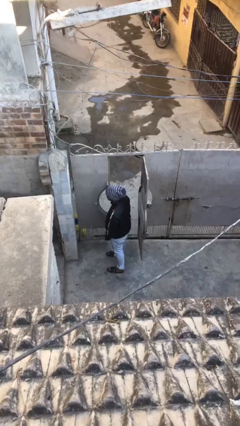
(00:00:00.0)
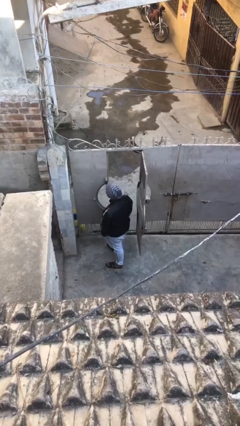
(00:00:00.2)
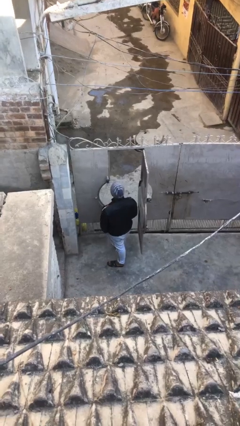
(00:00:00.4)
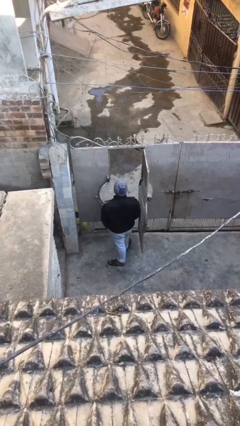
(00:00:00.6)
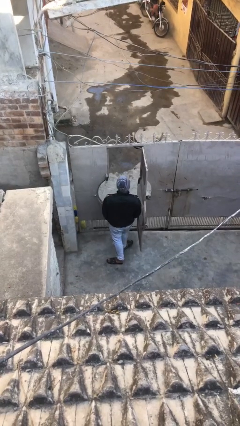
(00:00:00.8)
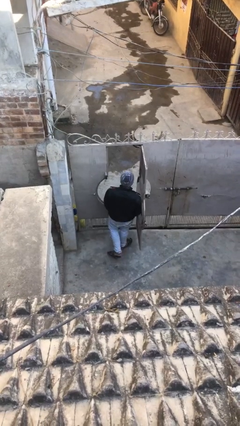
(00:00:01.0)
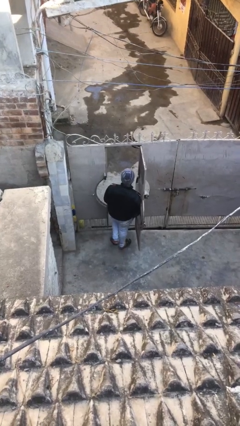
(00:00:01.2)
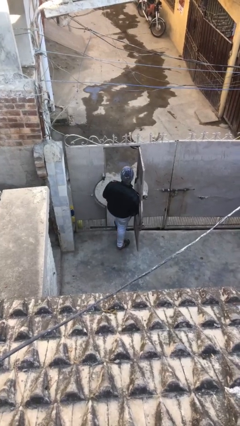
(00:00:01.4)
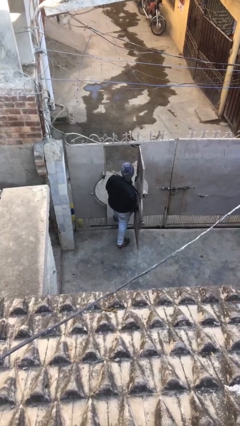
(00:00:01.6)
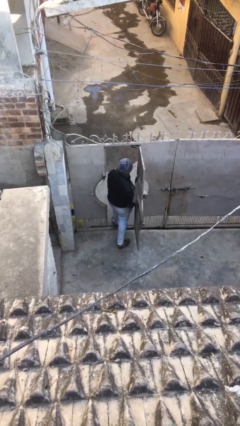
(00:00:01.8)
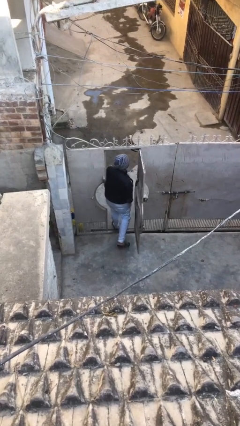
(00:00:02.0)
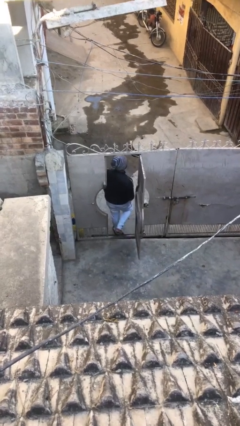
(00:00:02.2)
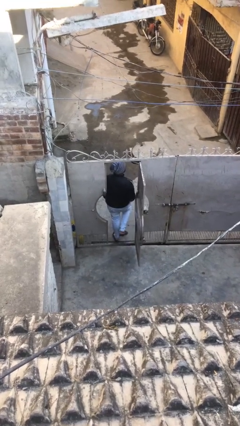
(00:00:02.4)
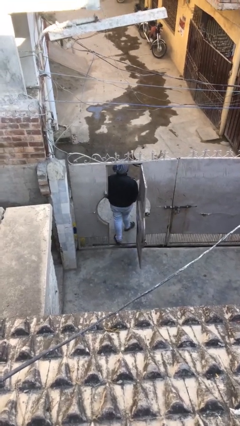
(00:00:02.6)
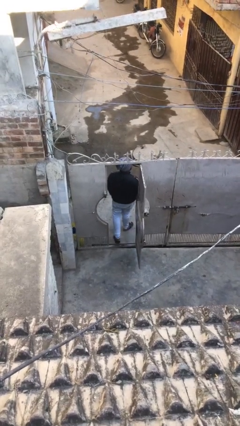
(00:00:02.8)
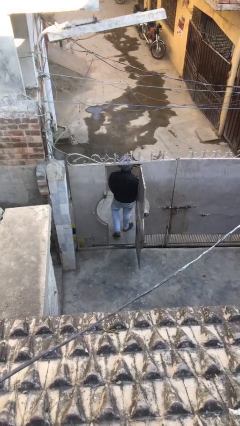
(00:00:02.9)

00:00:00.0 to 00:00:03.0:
person exits scene through structure

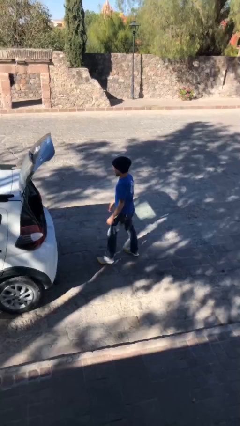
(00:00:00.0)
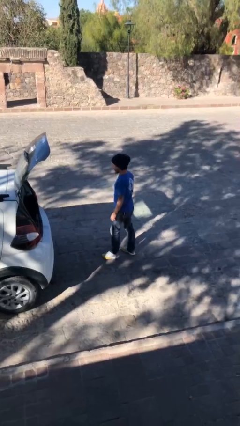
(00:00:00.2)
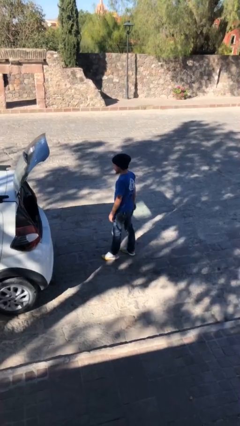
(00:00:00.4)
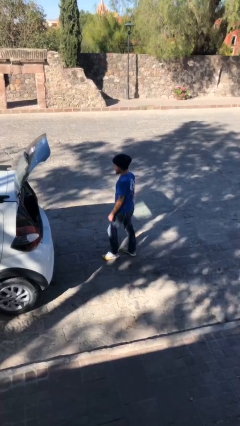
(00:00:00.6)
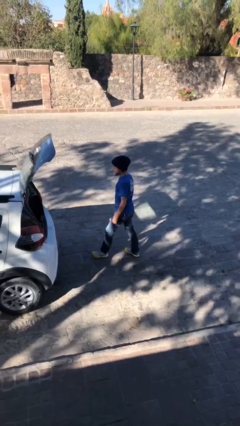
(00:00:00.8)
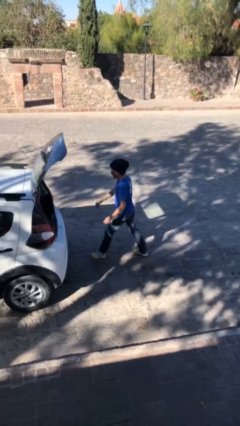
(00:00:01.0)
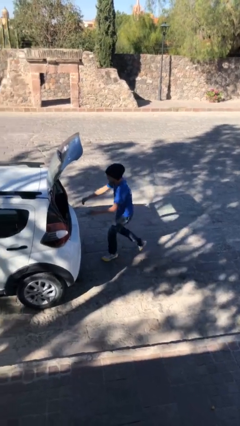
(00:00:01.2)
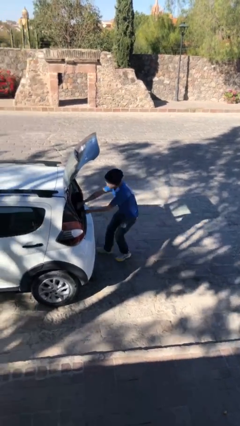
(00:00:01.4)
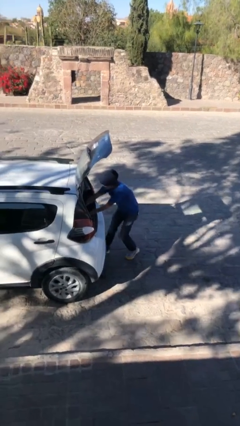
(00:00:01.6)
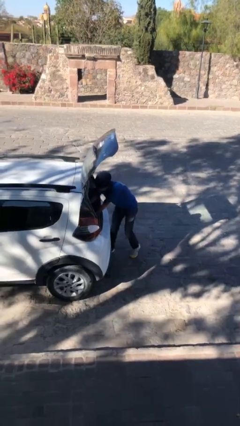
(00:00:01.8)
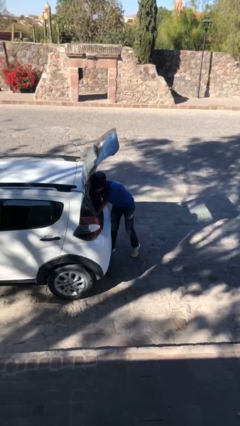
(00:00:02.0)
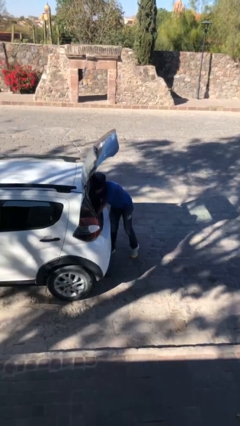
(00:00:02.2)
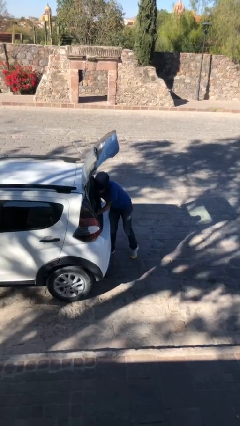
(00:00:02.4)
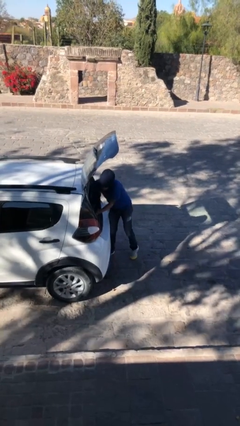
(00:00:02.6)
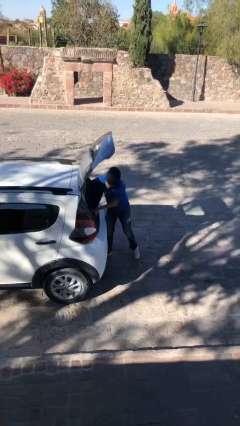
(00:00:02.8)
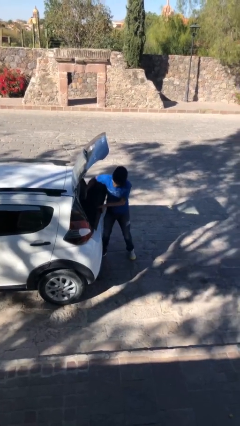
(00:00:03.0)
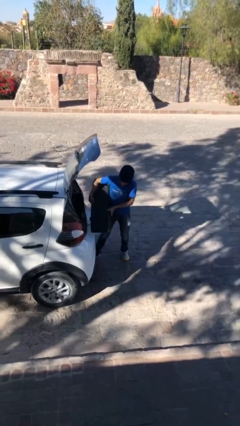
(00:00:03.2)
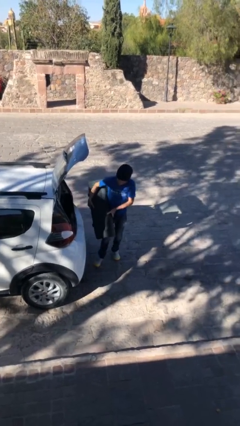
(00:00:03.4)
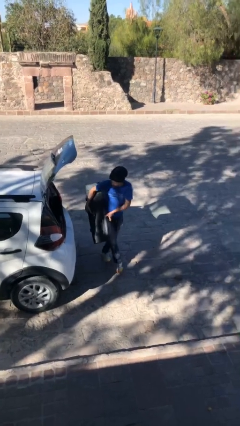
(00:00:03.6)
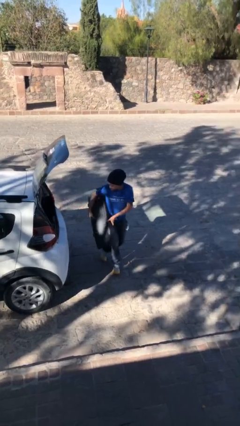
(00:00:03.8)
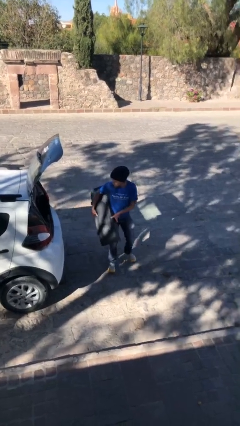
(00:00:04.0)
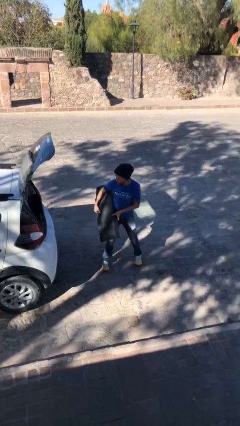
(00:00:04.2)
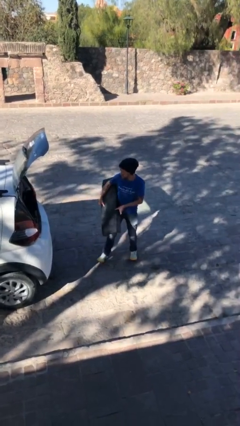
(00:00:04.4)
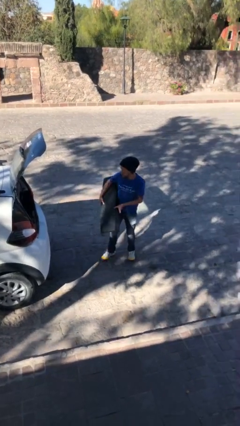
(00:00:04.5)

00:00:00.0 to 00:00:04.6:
person unloads car

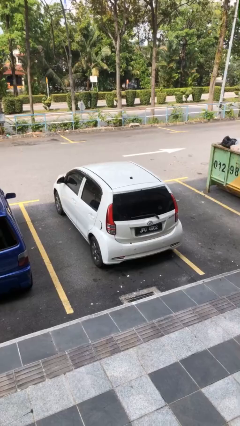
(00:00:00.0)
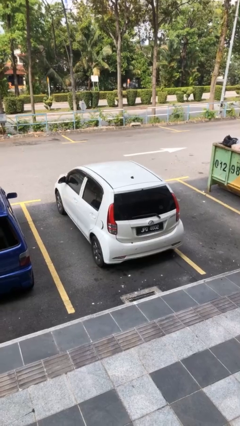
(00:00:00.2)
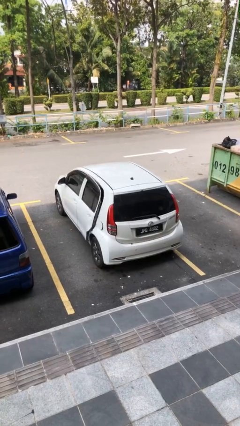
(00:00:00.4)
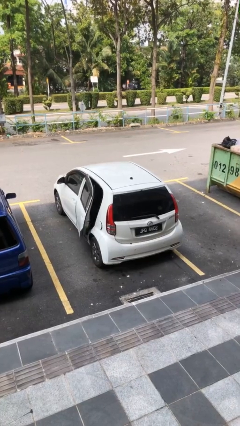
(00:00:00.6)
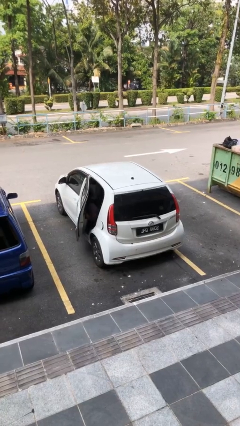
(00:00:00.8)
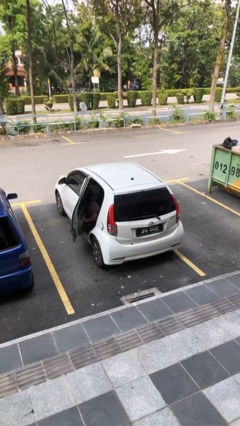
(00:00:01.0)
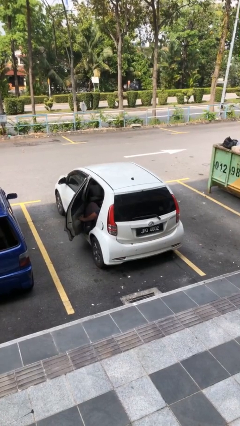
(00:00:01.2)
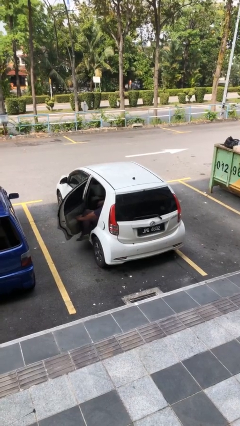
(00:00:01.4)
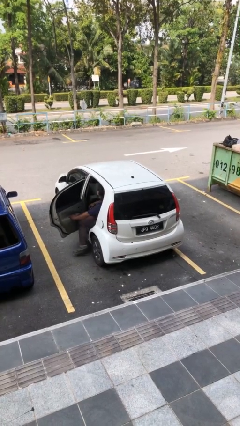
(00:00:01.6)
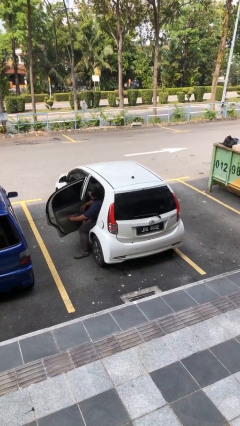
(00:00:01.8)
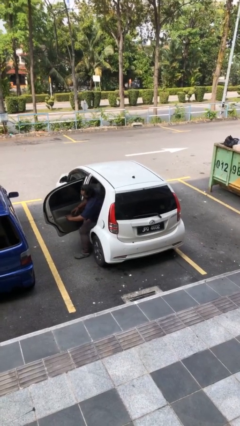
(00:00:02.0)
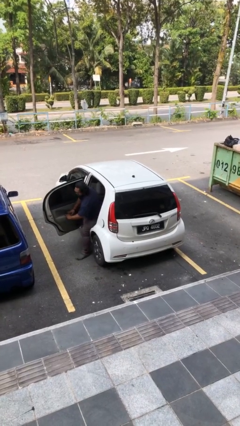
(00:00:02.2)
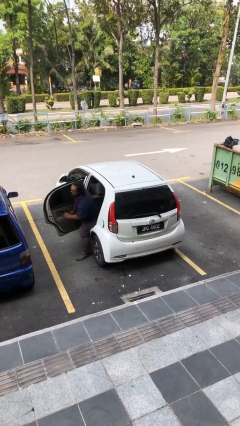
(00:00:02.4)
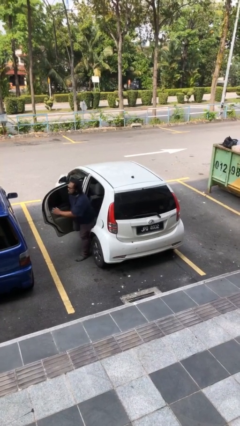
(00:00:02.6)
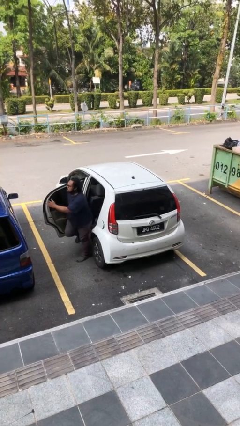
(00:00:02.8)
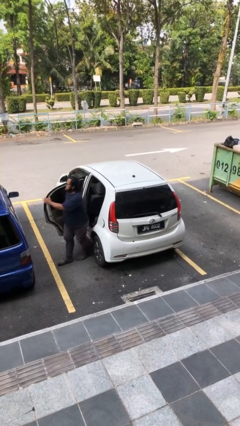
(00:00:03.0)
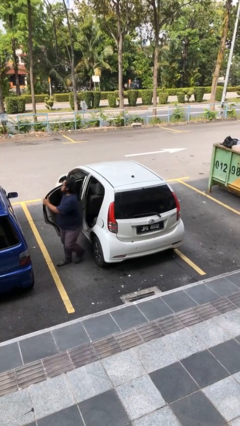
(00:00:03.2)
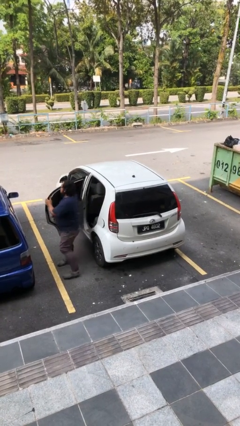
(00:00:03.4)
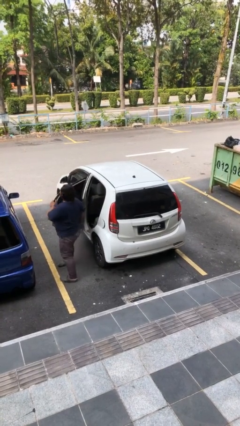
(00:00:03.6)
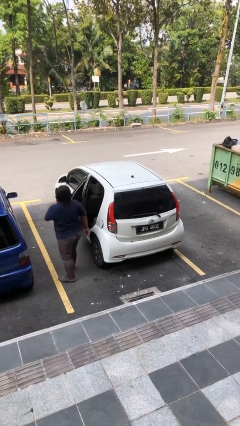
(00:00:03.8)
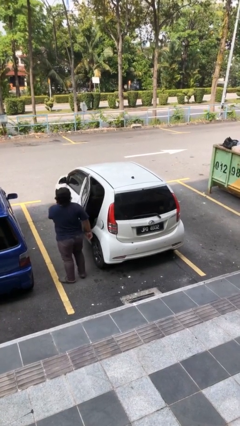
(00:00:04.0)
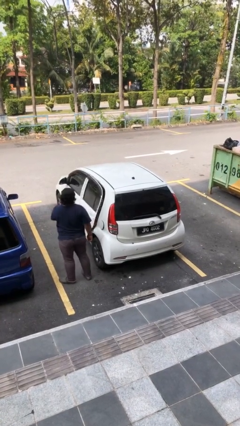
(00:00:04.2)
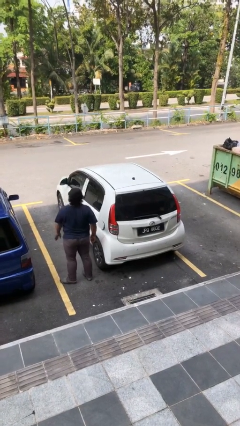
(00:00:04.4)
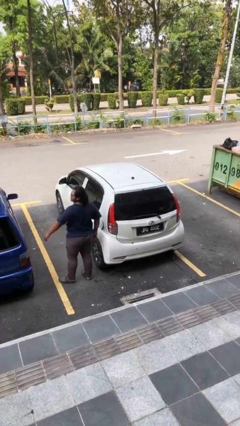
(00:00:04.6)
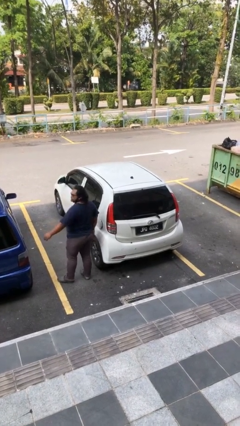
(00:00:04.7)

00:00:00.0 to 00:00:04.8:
car drops off person

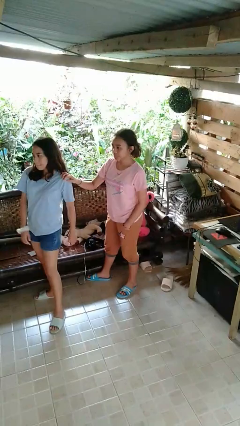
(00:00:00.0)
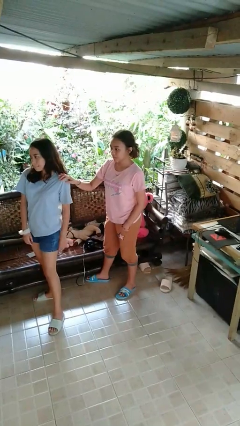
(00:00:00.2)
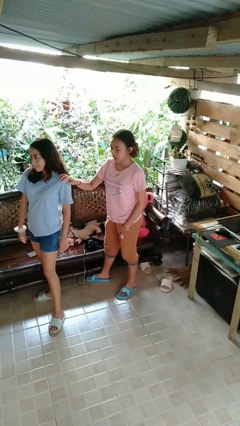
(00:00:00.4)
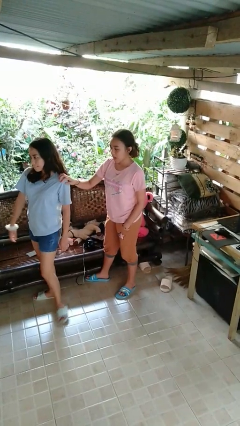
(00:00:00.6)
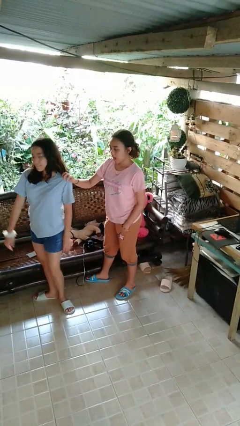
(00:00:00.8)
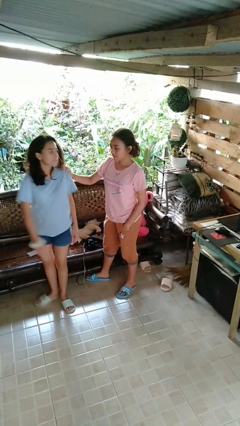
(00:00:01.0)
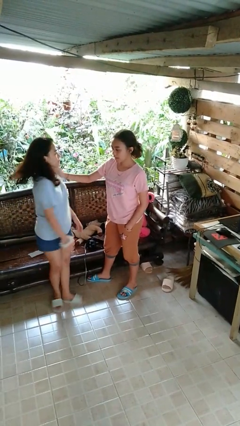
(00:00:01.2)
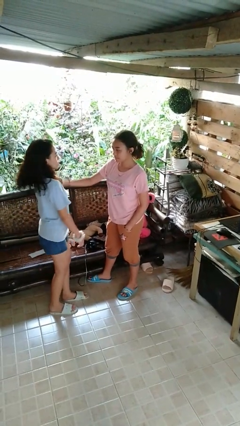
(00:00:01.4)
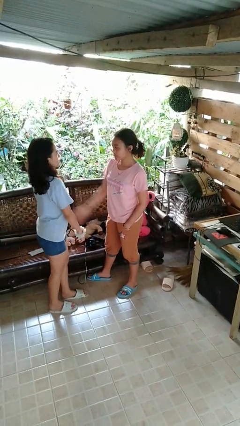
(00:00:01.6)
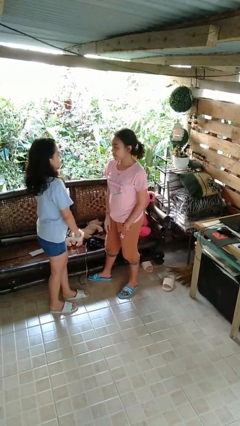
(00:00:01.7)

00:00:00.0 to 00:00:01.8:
person spins person around

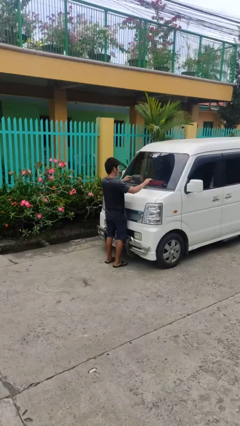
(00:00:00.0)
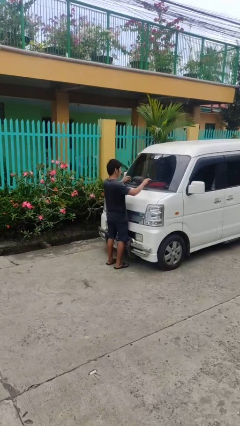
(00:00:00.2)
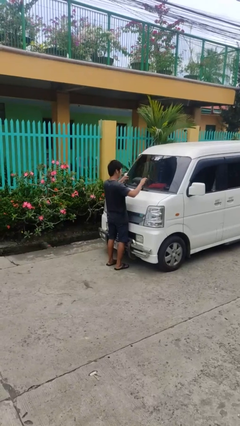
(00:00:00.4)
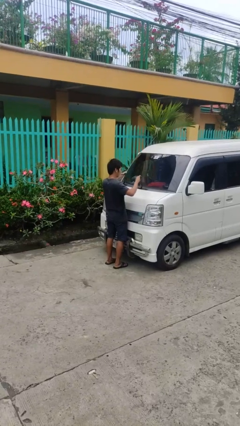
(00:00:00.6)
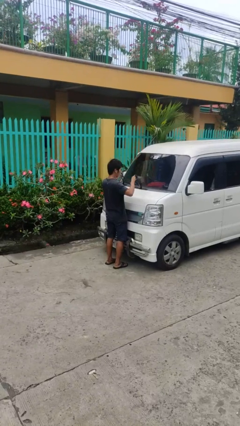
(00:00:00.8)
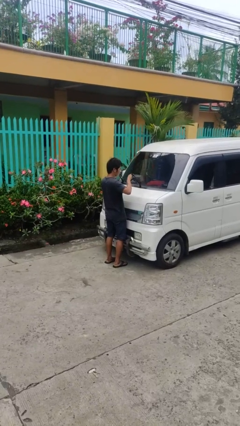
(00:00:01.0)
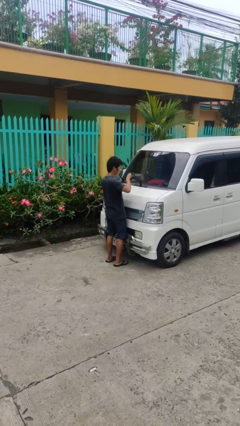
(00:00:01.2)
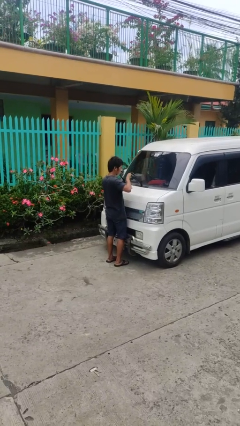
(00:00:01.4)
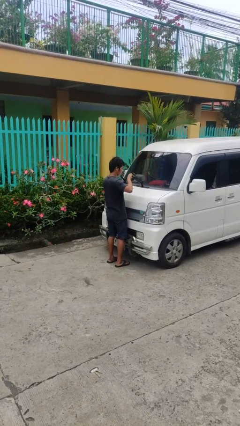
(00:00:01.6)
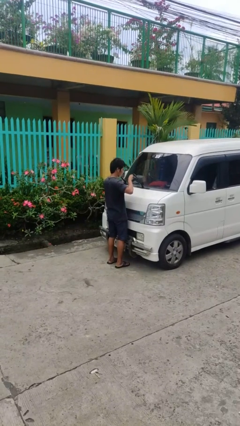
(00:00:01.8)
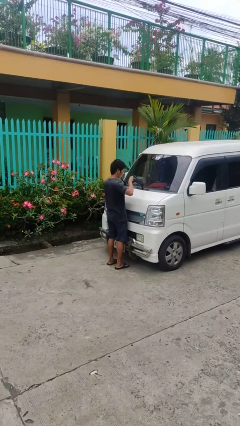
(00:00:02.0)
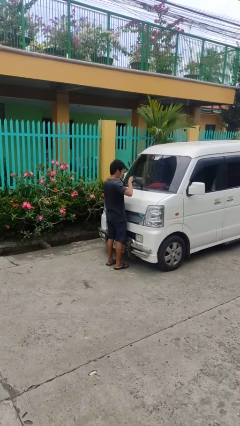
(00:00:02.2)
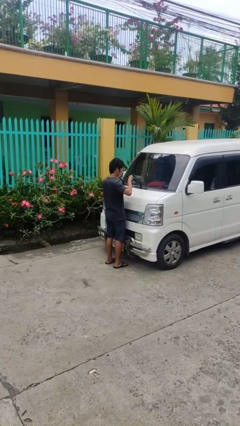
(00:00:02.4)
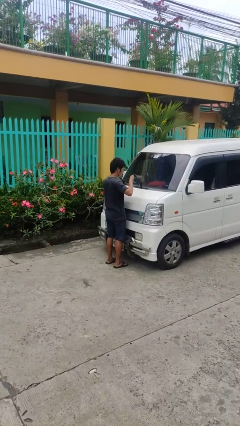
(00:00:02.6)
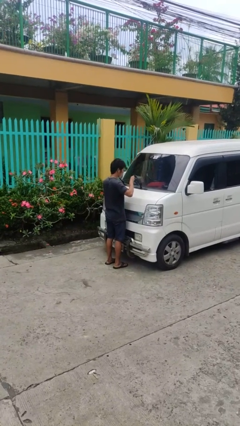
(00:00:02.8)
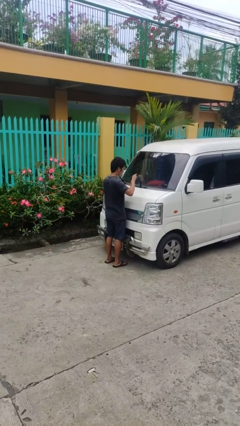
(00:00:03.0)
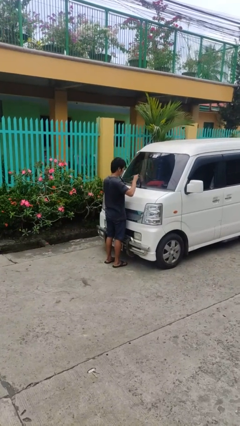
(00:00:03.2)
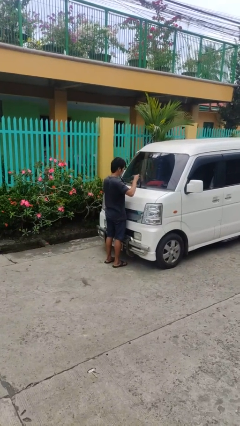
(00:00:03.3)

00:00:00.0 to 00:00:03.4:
person flips up car wipers
